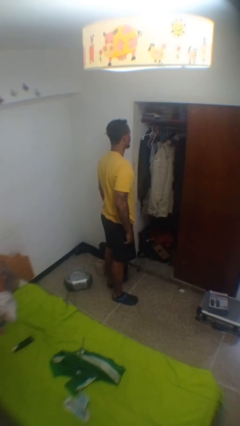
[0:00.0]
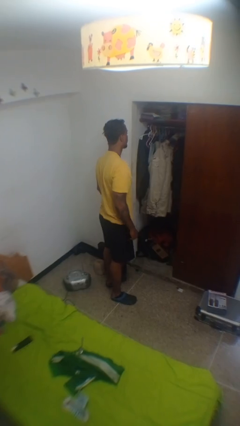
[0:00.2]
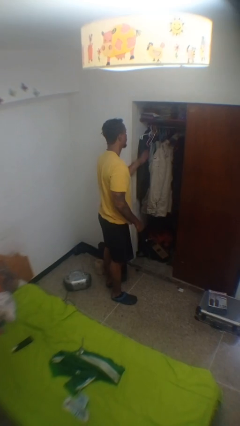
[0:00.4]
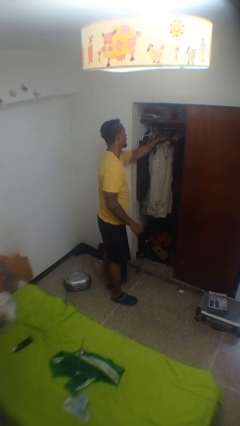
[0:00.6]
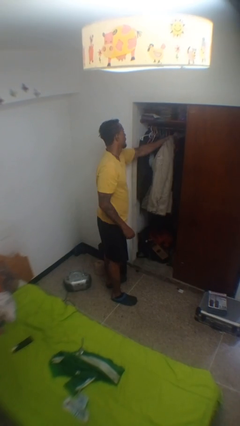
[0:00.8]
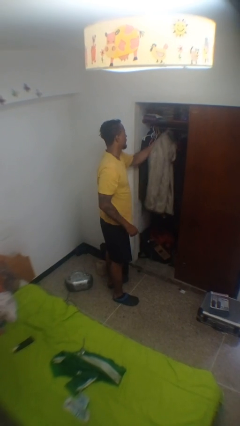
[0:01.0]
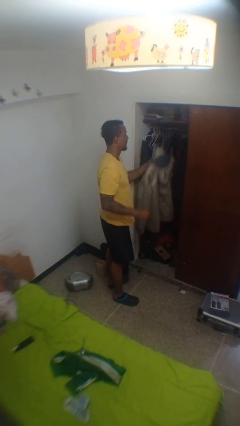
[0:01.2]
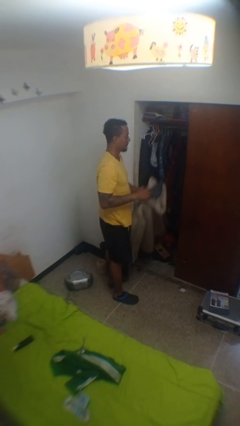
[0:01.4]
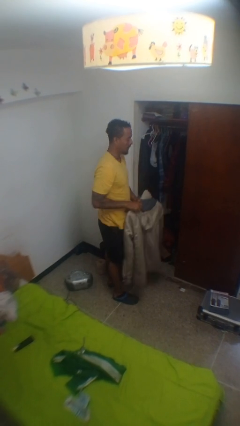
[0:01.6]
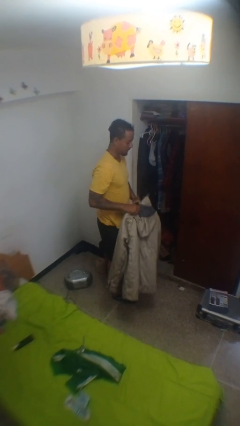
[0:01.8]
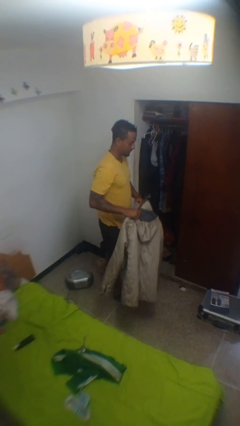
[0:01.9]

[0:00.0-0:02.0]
person takes clothes from closet

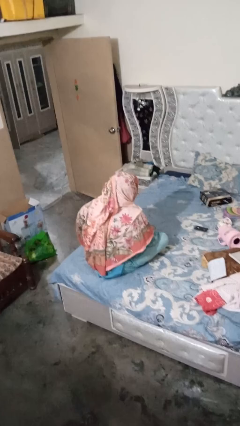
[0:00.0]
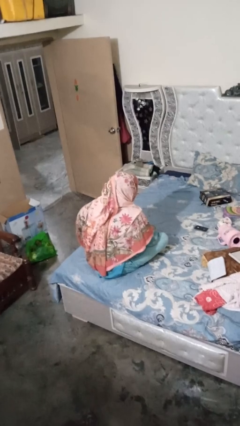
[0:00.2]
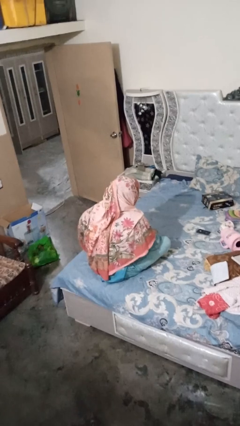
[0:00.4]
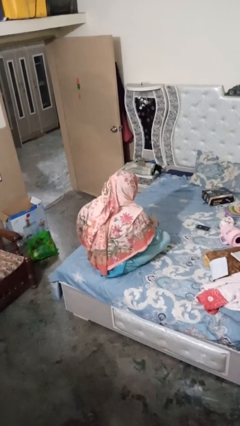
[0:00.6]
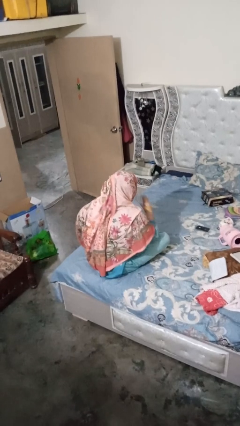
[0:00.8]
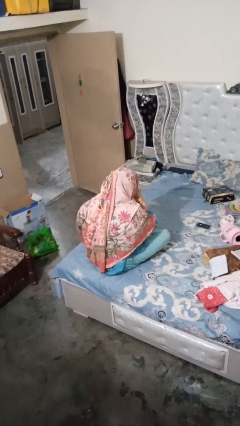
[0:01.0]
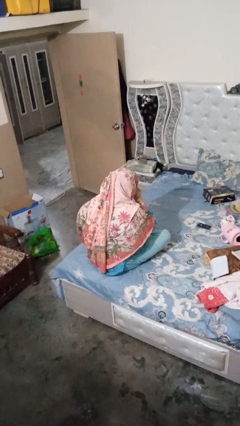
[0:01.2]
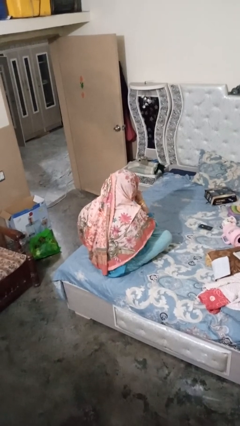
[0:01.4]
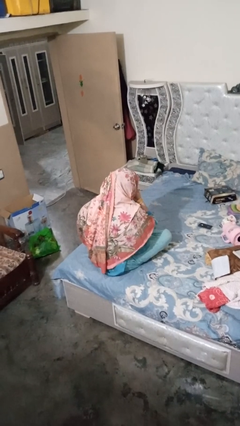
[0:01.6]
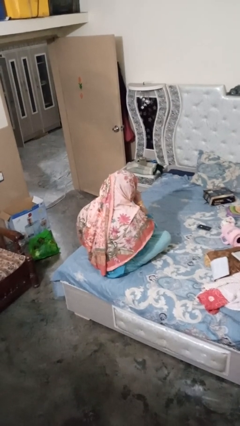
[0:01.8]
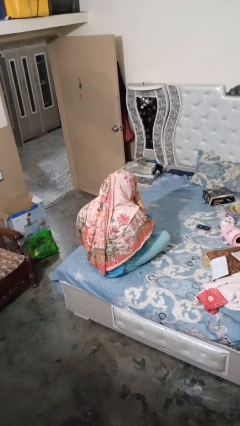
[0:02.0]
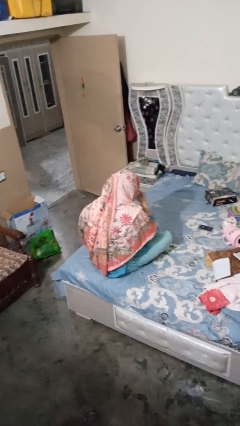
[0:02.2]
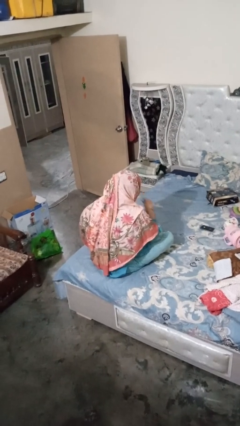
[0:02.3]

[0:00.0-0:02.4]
person blows nose

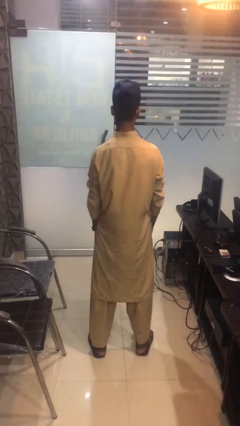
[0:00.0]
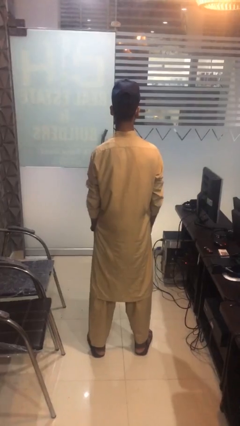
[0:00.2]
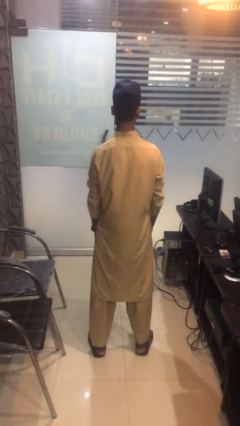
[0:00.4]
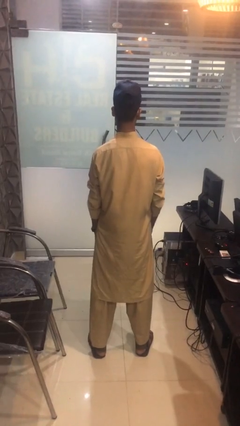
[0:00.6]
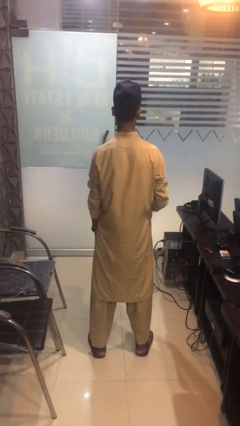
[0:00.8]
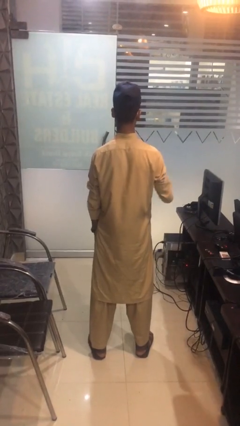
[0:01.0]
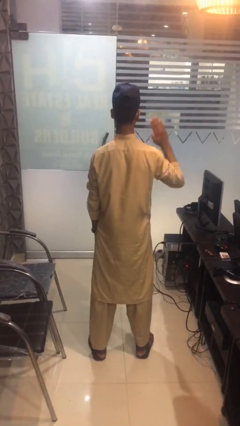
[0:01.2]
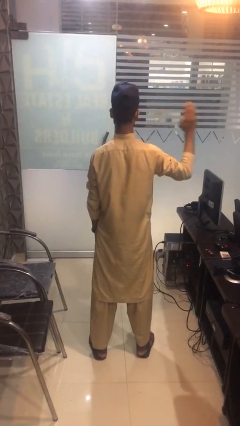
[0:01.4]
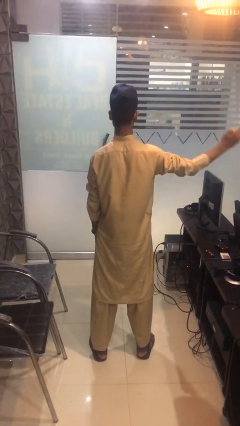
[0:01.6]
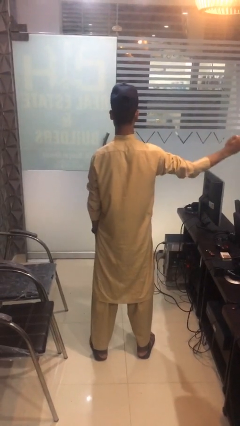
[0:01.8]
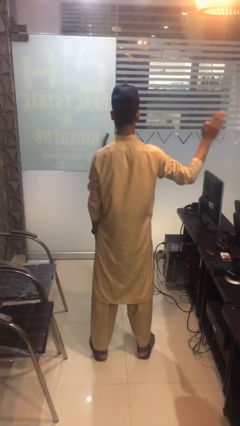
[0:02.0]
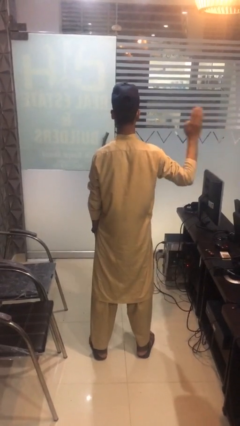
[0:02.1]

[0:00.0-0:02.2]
person gestures swipe right
